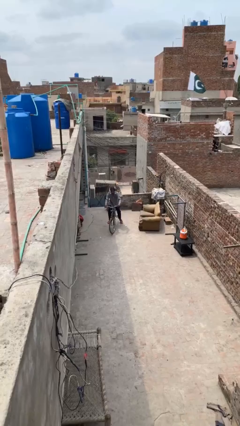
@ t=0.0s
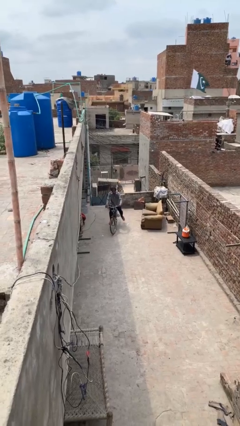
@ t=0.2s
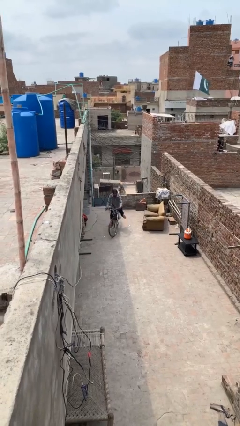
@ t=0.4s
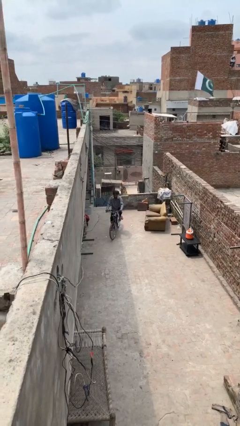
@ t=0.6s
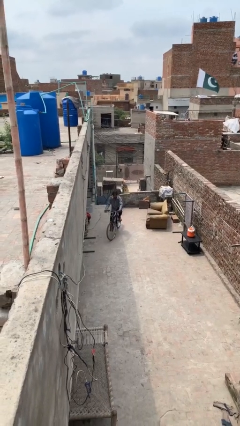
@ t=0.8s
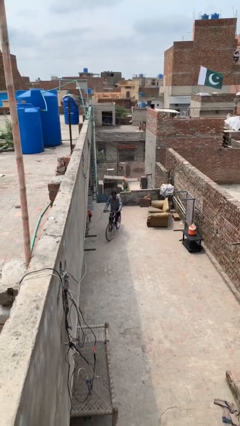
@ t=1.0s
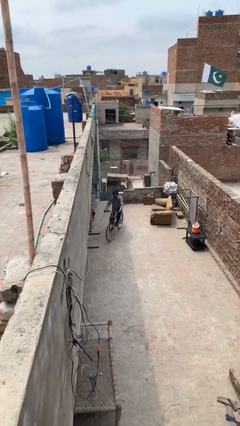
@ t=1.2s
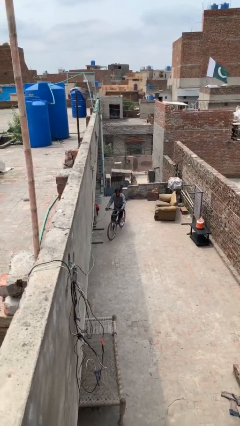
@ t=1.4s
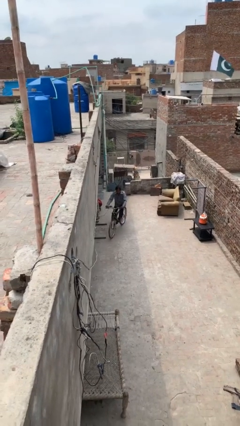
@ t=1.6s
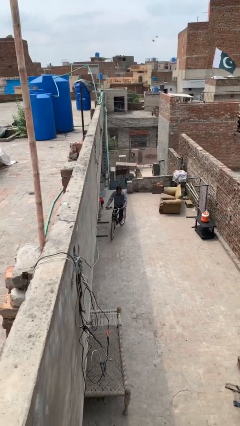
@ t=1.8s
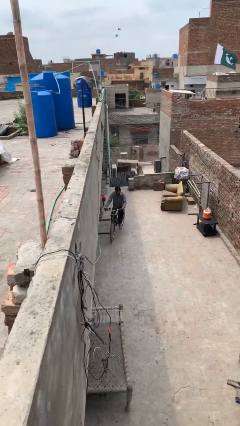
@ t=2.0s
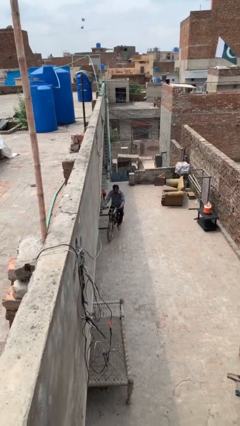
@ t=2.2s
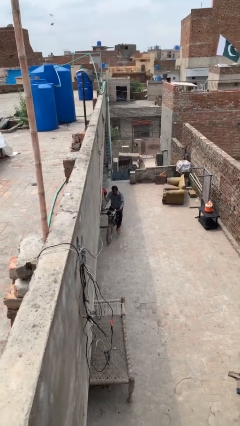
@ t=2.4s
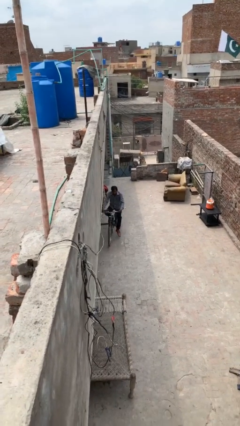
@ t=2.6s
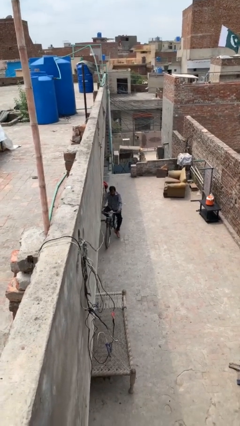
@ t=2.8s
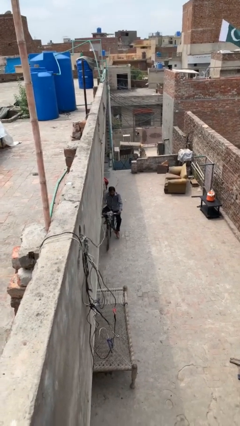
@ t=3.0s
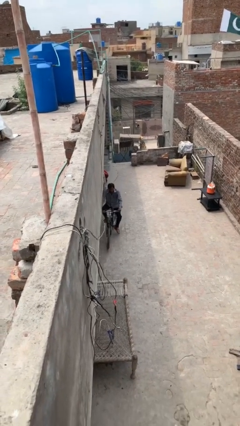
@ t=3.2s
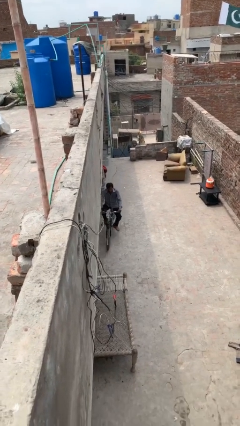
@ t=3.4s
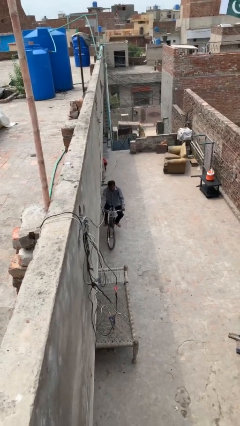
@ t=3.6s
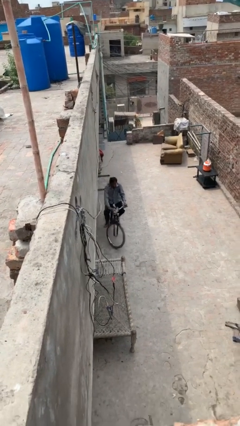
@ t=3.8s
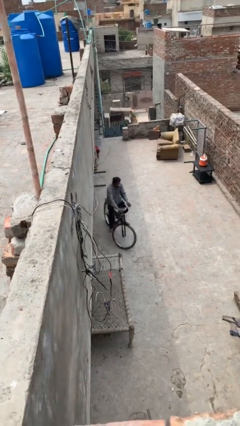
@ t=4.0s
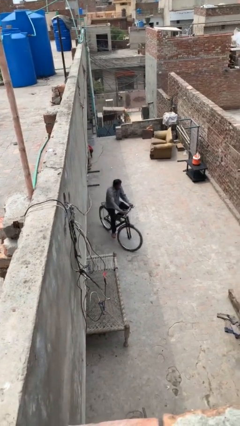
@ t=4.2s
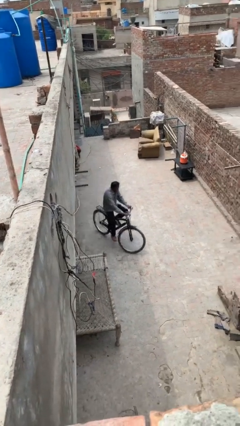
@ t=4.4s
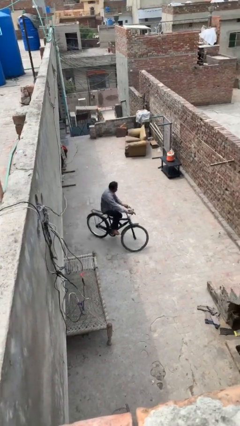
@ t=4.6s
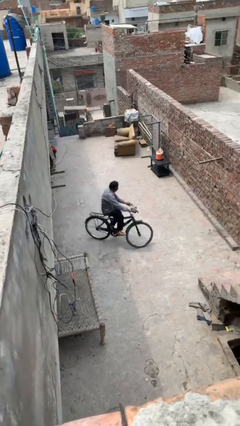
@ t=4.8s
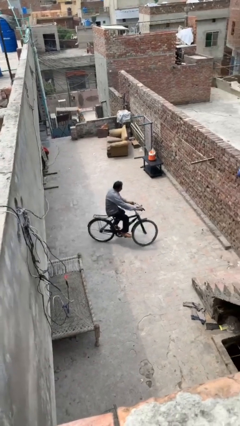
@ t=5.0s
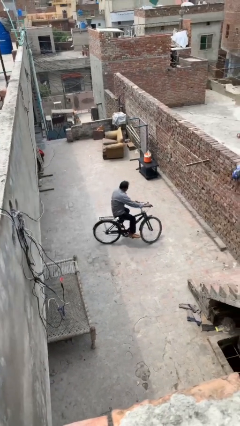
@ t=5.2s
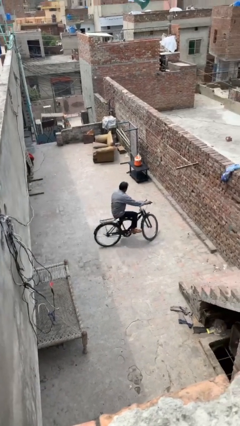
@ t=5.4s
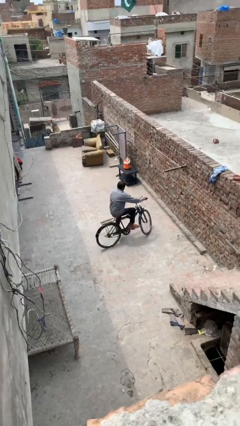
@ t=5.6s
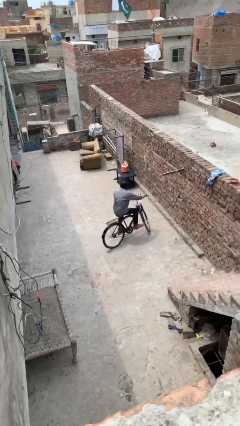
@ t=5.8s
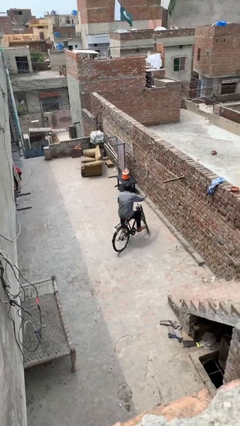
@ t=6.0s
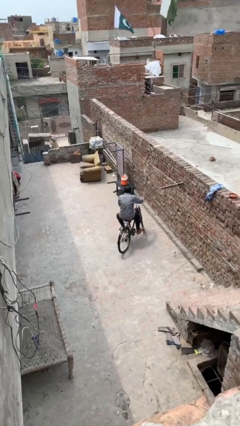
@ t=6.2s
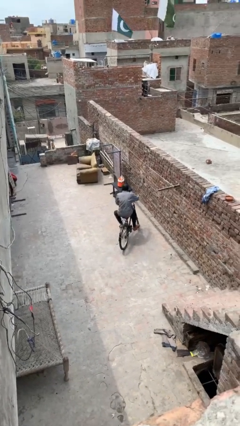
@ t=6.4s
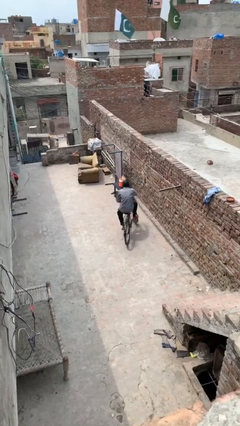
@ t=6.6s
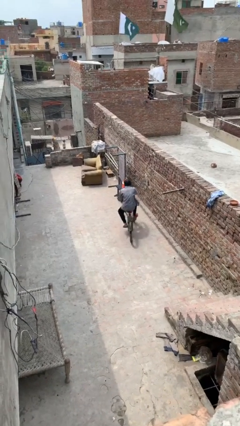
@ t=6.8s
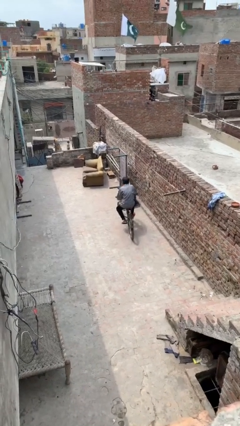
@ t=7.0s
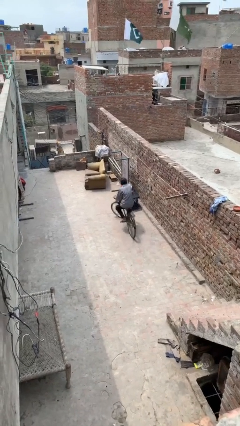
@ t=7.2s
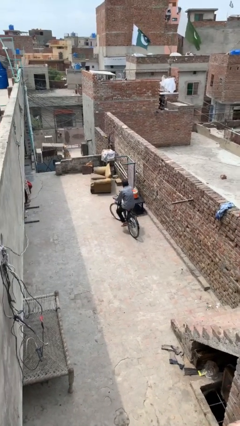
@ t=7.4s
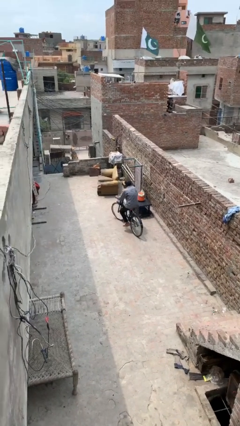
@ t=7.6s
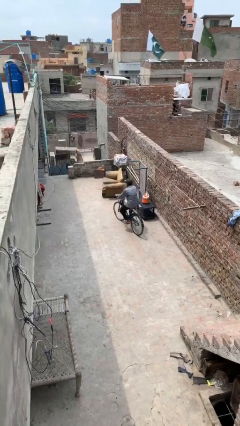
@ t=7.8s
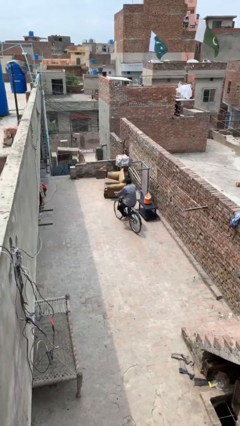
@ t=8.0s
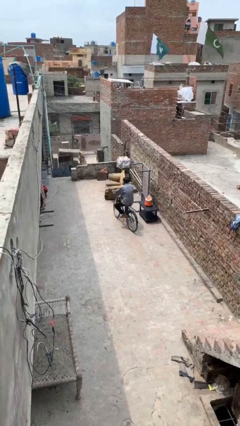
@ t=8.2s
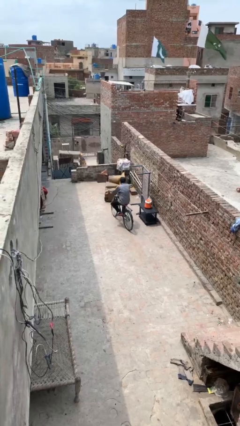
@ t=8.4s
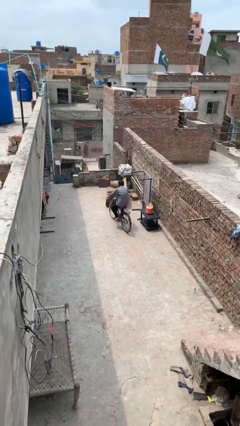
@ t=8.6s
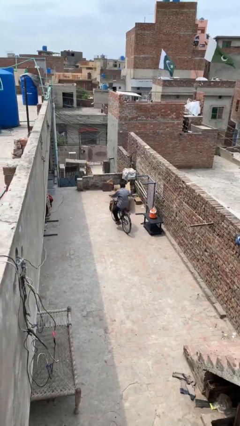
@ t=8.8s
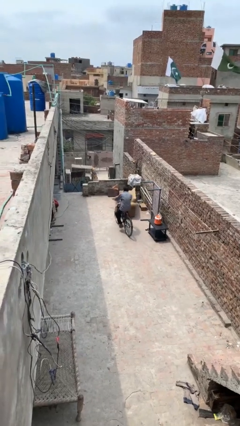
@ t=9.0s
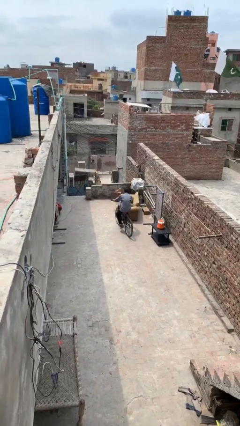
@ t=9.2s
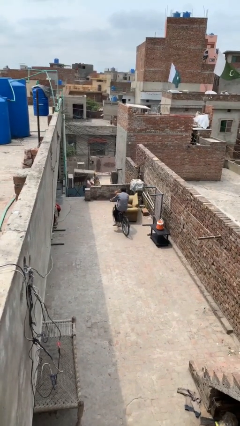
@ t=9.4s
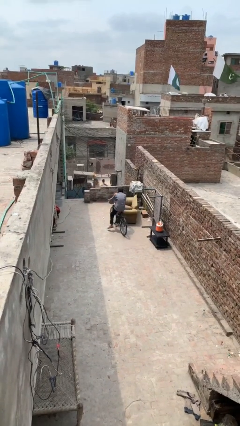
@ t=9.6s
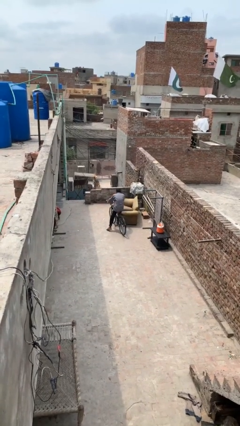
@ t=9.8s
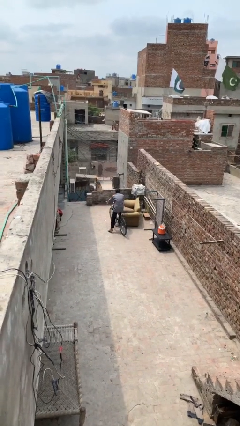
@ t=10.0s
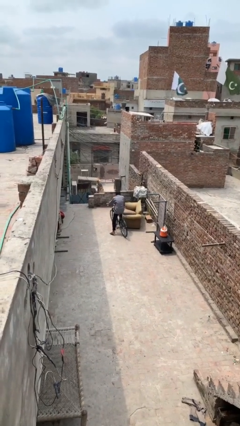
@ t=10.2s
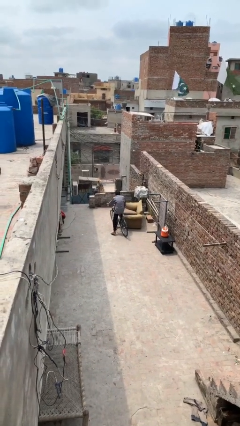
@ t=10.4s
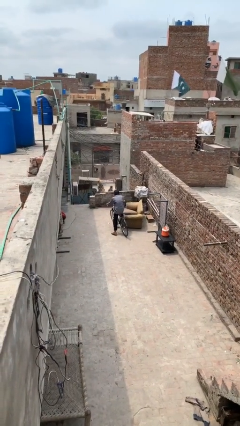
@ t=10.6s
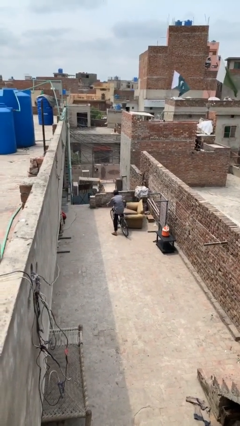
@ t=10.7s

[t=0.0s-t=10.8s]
person rides bicycle

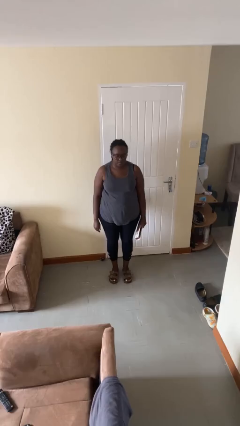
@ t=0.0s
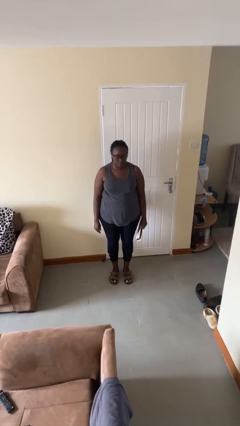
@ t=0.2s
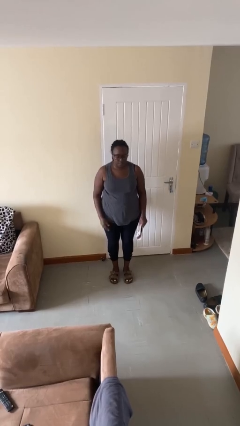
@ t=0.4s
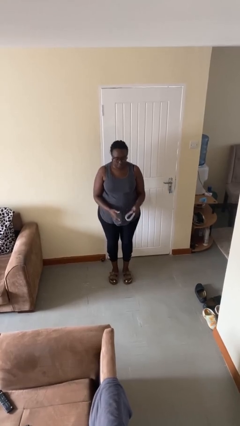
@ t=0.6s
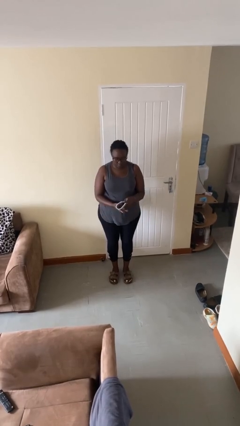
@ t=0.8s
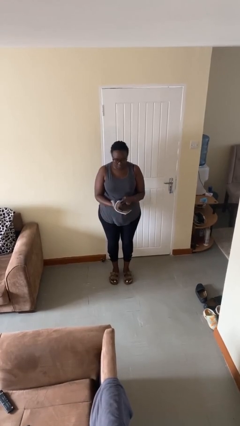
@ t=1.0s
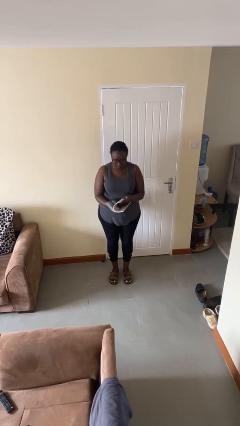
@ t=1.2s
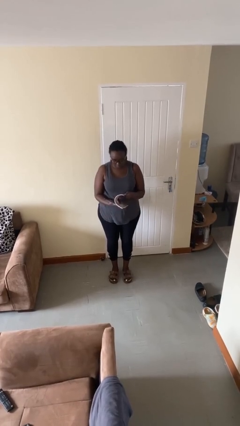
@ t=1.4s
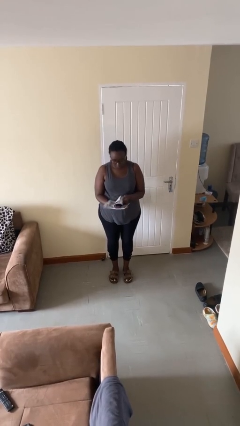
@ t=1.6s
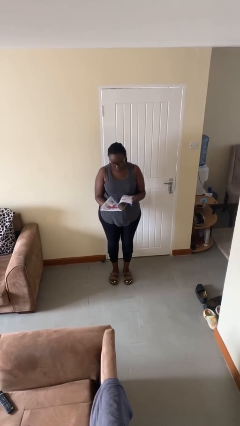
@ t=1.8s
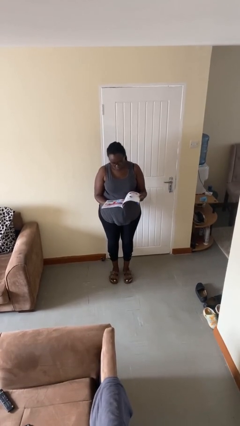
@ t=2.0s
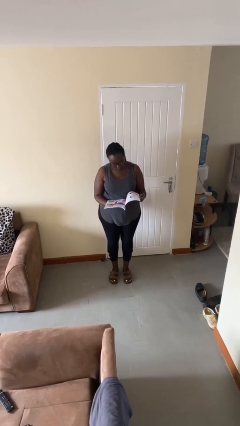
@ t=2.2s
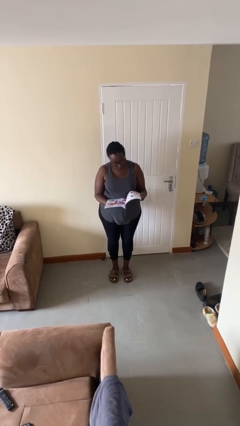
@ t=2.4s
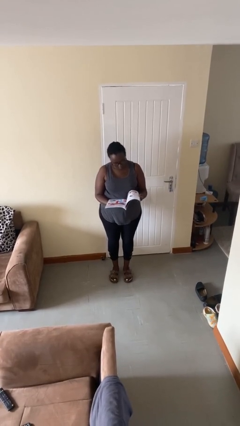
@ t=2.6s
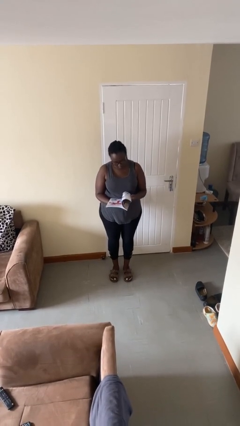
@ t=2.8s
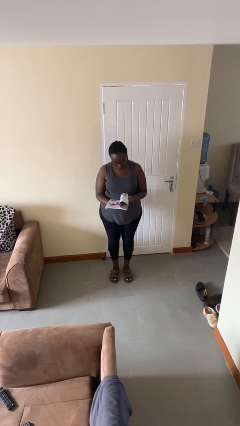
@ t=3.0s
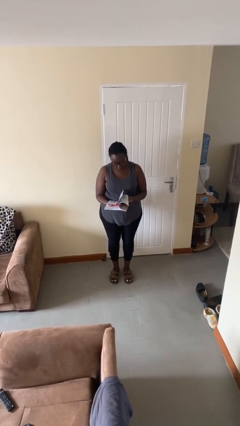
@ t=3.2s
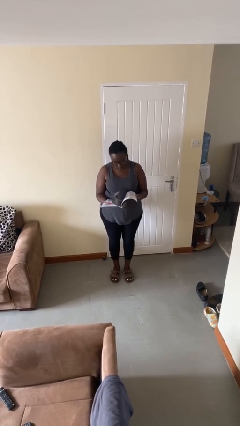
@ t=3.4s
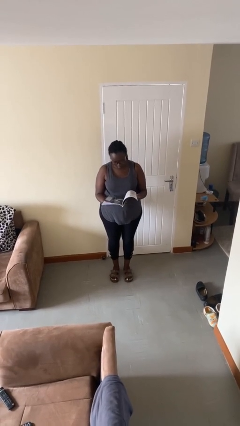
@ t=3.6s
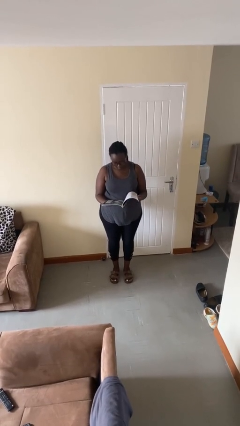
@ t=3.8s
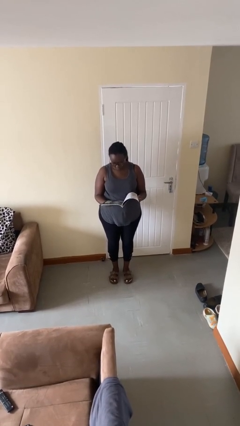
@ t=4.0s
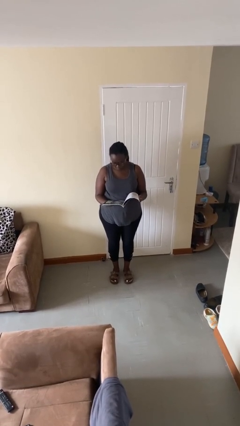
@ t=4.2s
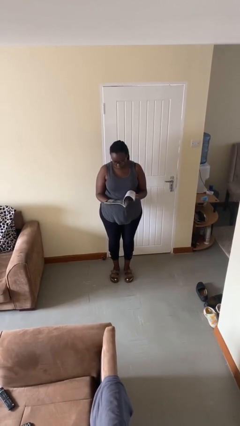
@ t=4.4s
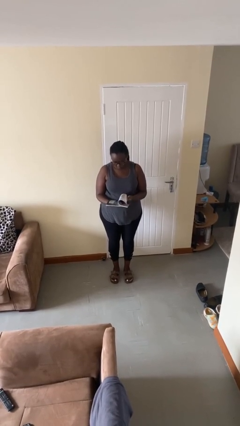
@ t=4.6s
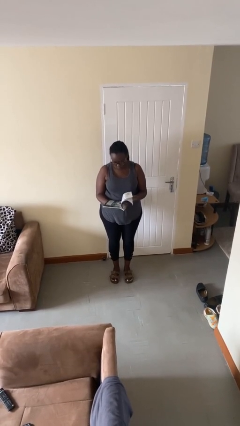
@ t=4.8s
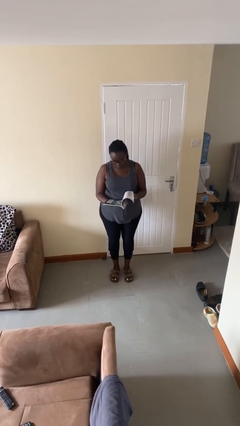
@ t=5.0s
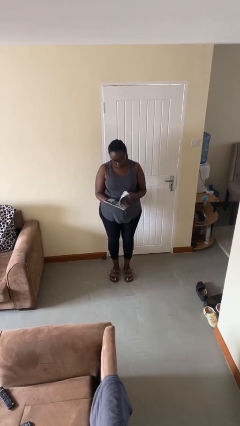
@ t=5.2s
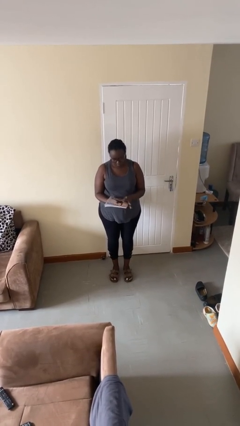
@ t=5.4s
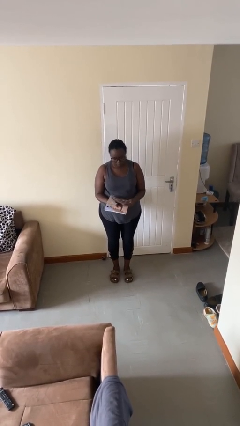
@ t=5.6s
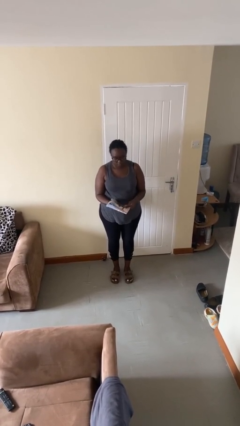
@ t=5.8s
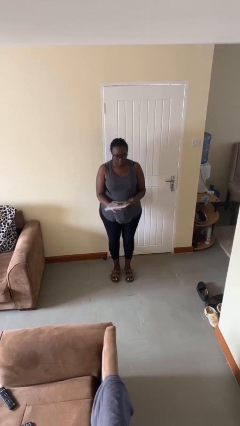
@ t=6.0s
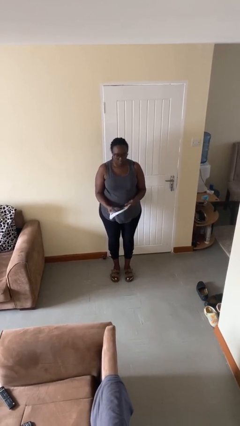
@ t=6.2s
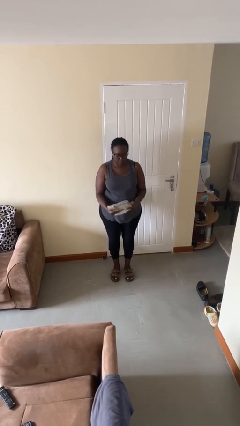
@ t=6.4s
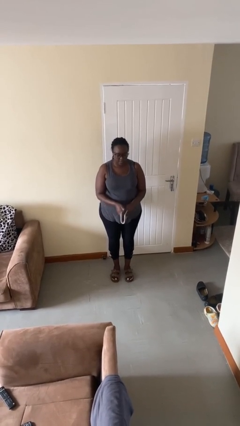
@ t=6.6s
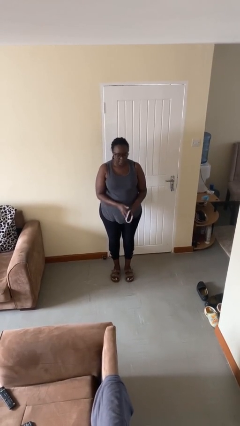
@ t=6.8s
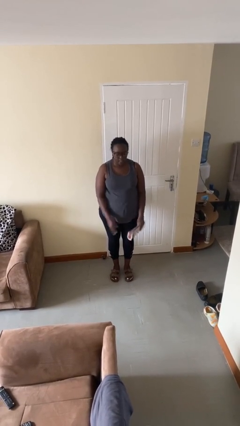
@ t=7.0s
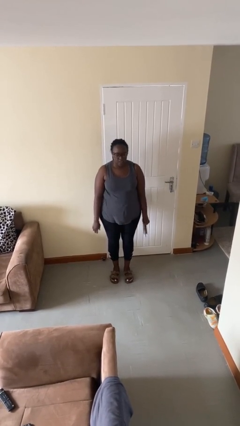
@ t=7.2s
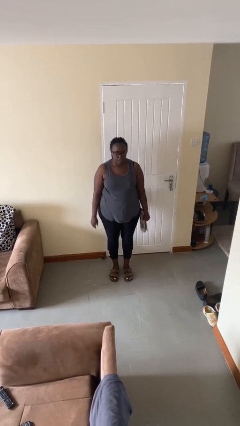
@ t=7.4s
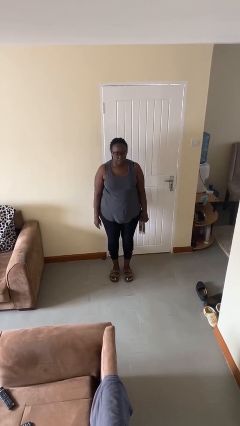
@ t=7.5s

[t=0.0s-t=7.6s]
person reads magazine
